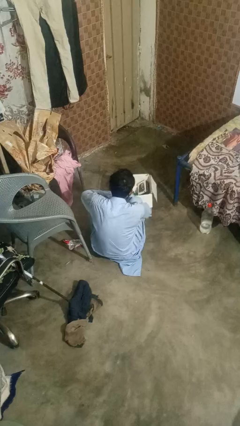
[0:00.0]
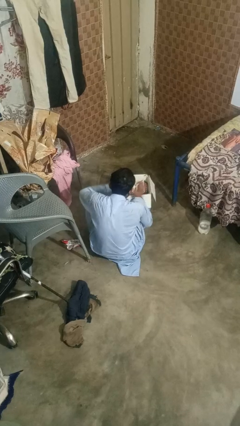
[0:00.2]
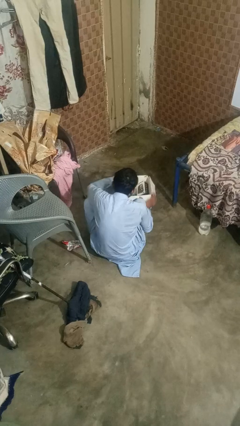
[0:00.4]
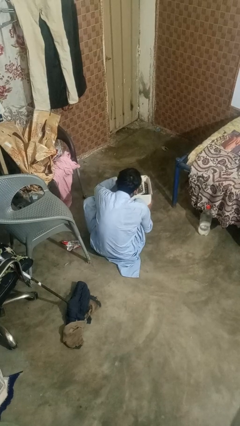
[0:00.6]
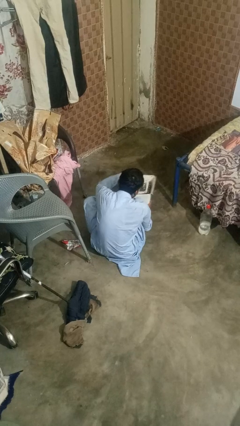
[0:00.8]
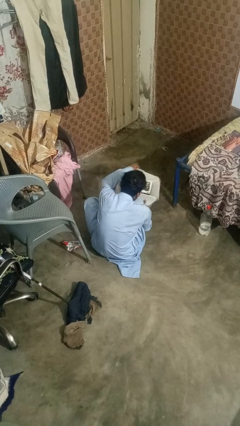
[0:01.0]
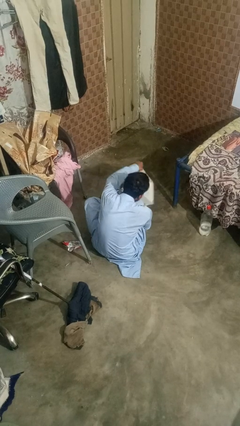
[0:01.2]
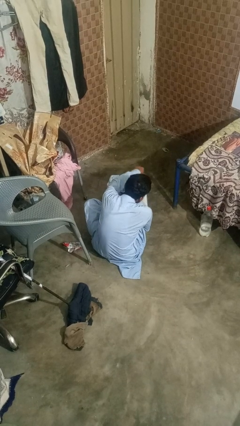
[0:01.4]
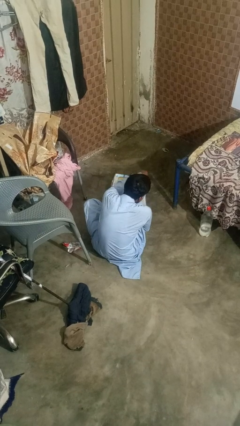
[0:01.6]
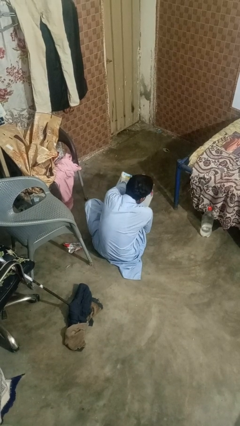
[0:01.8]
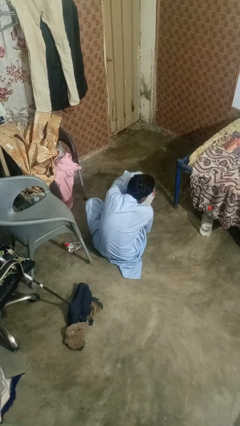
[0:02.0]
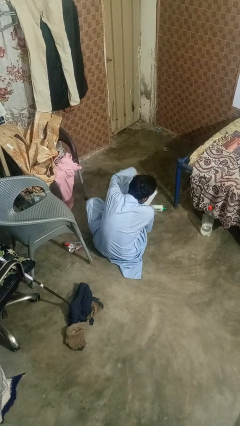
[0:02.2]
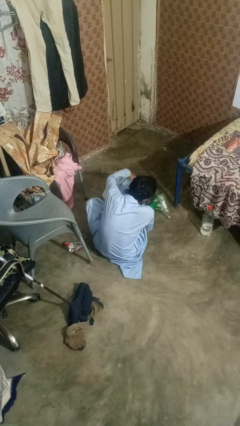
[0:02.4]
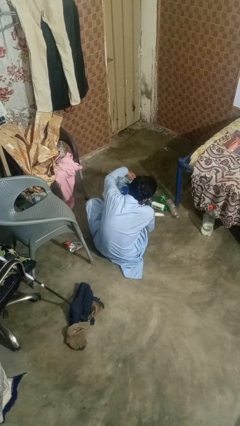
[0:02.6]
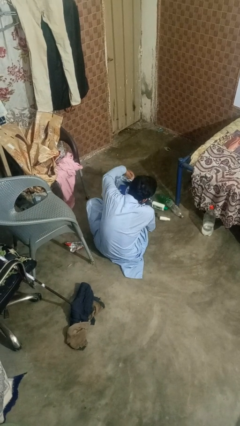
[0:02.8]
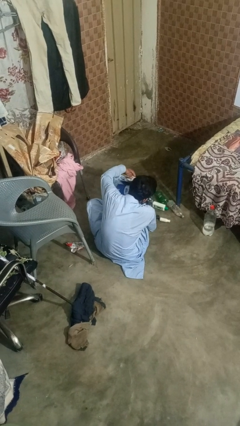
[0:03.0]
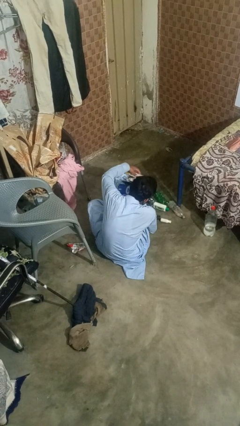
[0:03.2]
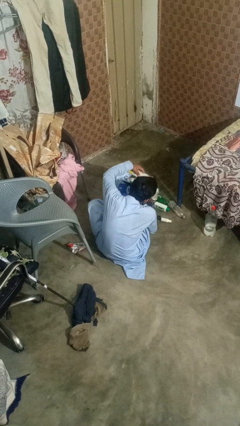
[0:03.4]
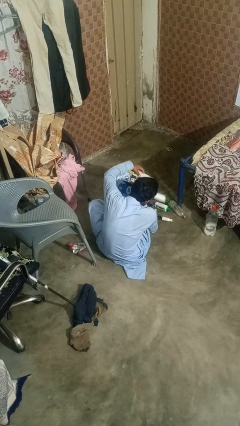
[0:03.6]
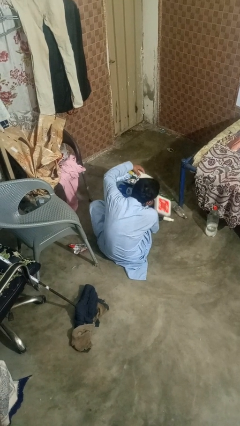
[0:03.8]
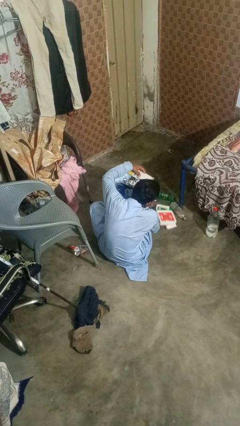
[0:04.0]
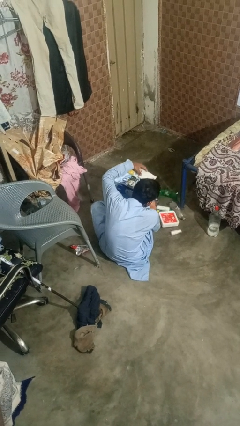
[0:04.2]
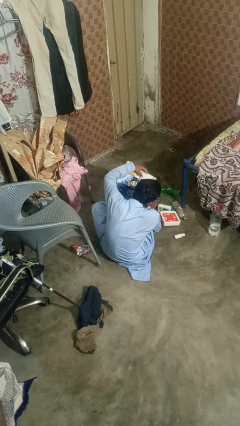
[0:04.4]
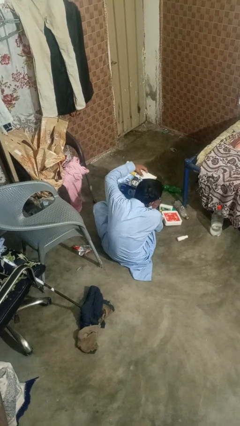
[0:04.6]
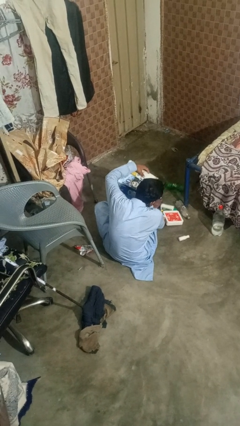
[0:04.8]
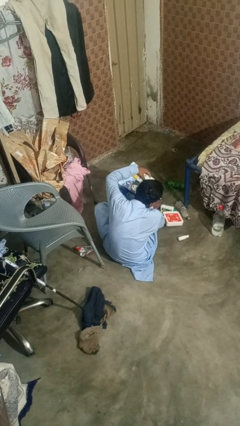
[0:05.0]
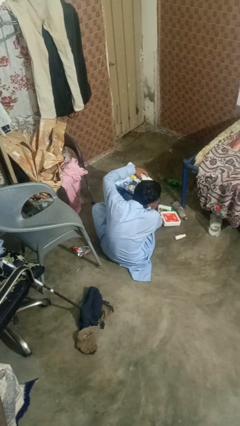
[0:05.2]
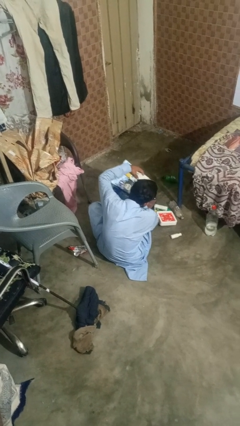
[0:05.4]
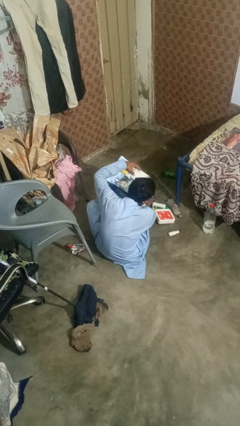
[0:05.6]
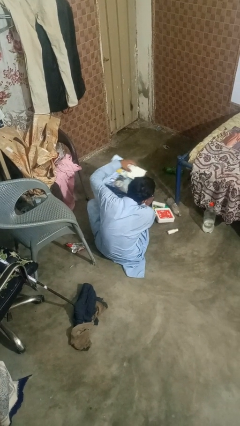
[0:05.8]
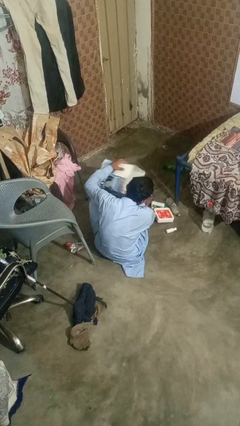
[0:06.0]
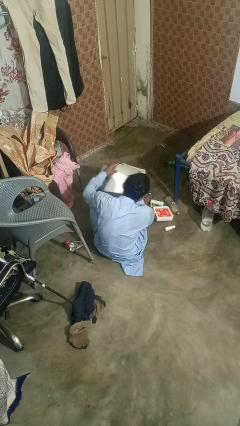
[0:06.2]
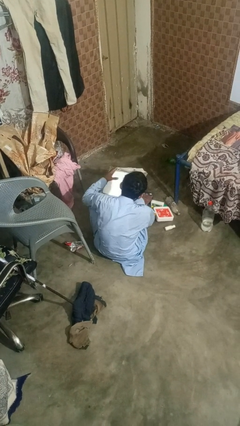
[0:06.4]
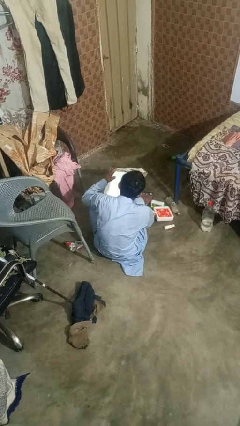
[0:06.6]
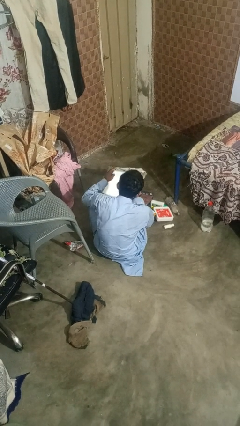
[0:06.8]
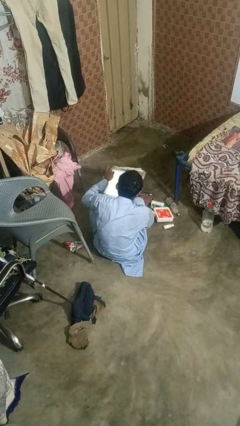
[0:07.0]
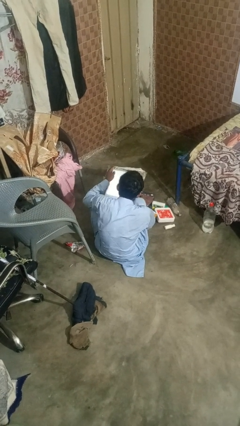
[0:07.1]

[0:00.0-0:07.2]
person unloads box onto floor

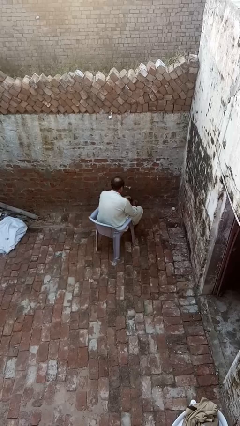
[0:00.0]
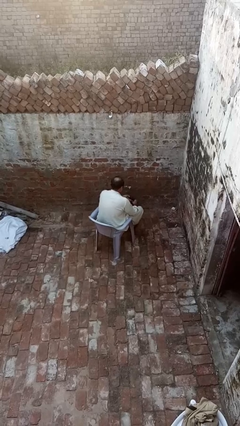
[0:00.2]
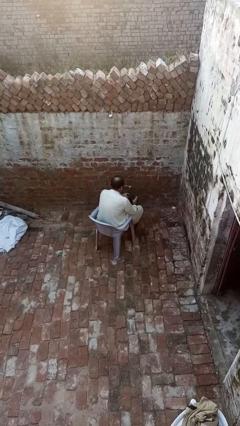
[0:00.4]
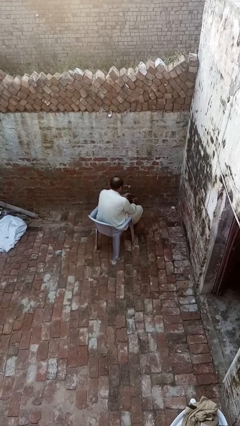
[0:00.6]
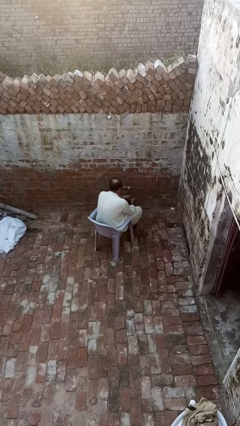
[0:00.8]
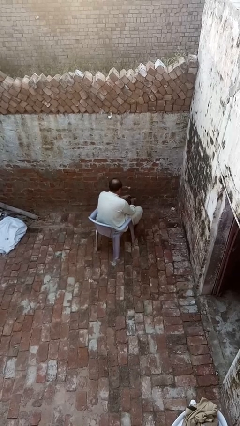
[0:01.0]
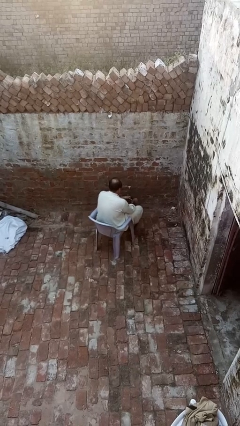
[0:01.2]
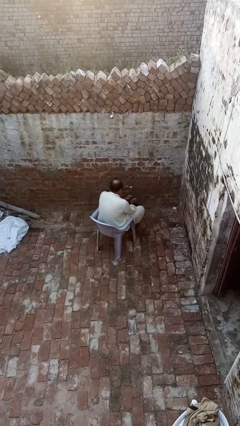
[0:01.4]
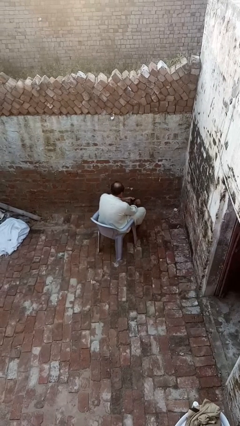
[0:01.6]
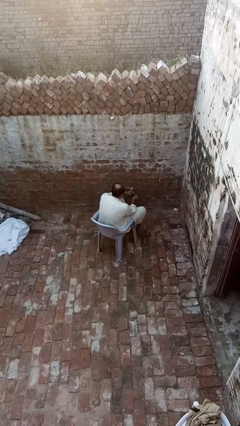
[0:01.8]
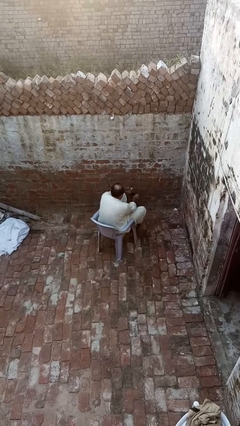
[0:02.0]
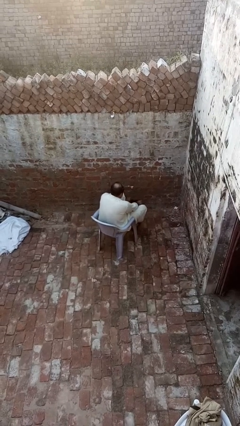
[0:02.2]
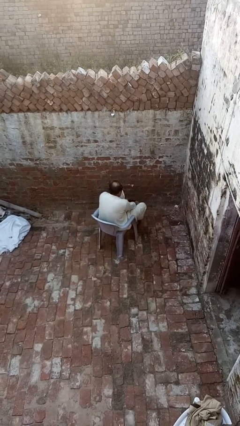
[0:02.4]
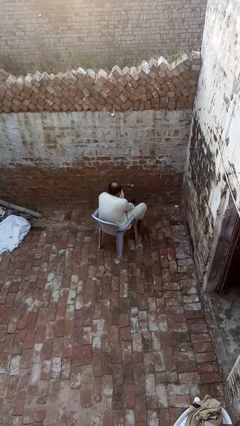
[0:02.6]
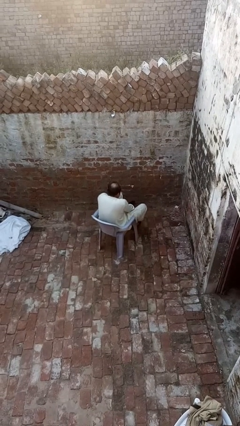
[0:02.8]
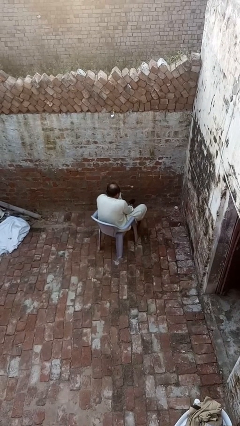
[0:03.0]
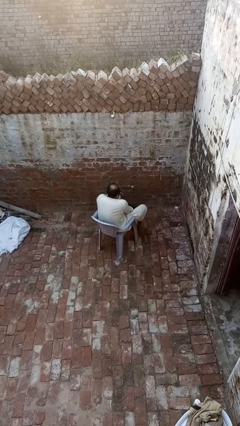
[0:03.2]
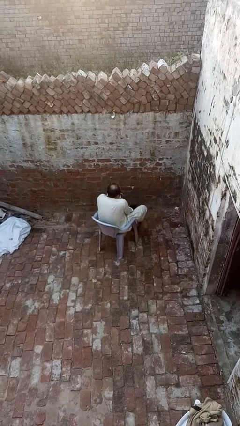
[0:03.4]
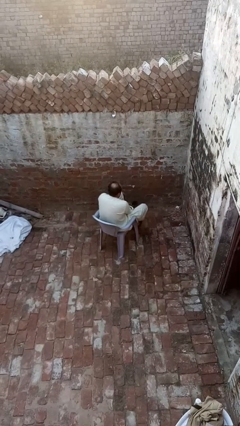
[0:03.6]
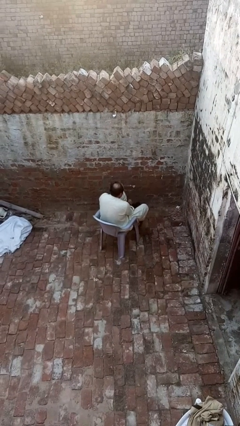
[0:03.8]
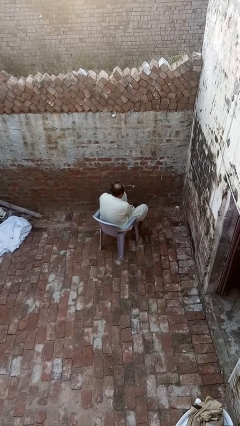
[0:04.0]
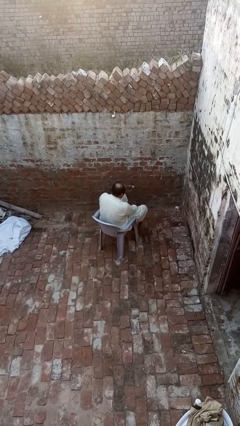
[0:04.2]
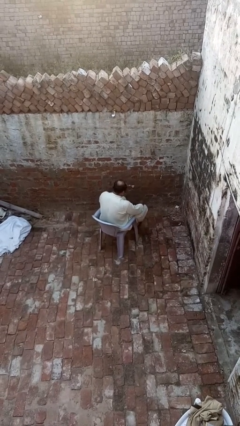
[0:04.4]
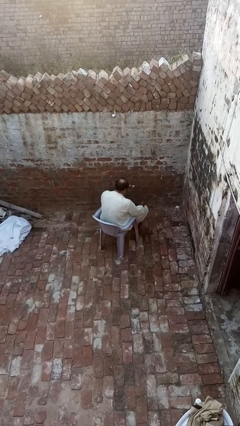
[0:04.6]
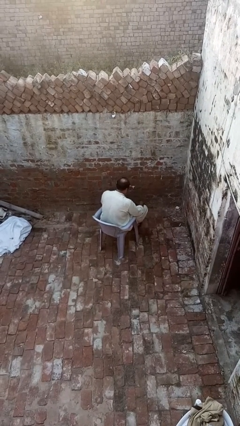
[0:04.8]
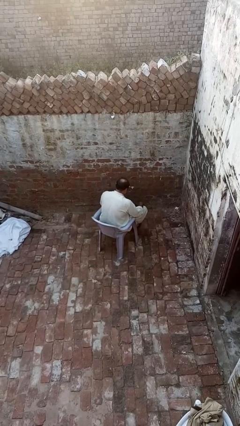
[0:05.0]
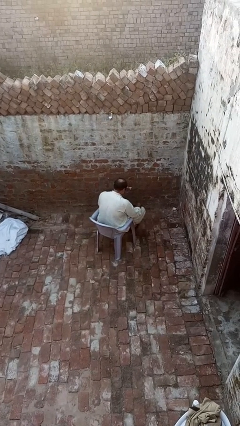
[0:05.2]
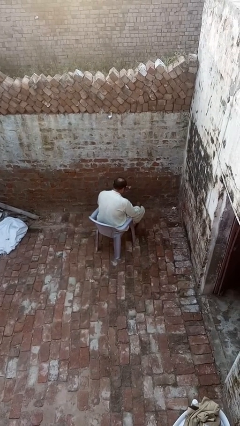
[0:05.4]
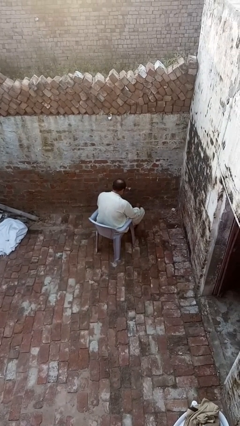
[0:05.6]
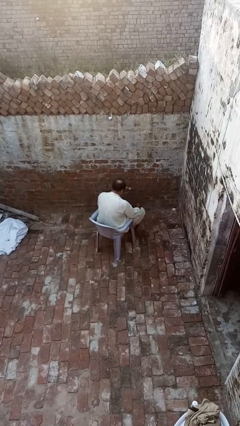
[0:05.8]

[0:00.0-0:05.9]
person puts on socks

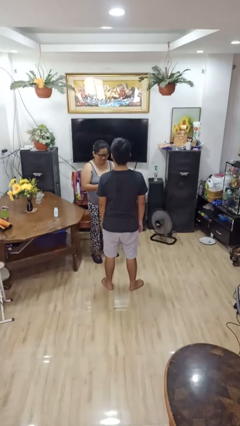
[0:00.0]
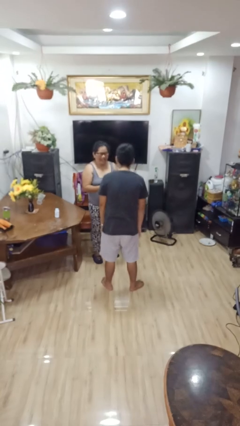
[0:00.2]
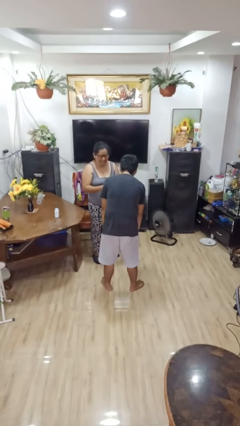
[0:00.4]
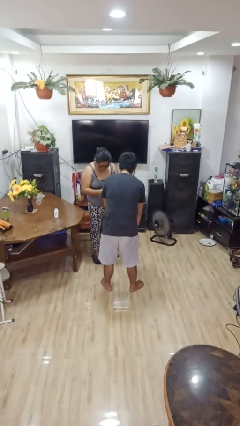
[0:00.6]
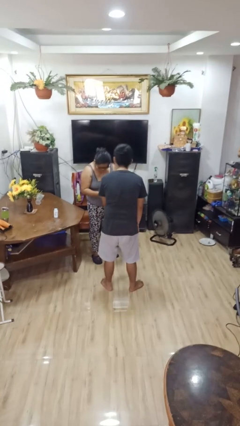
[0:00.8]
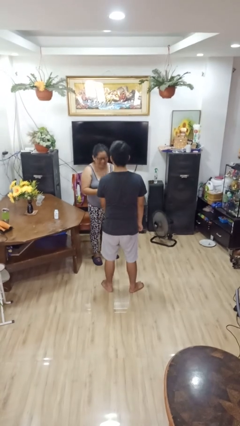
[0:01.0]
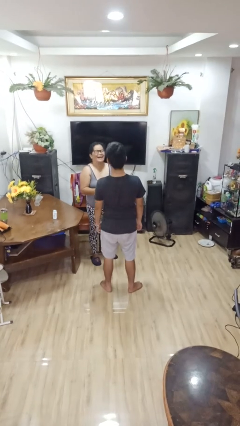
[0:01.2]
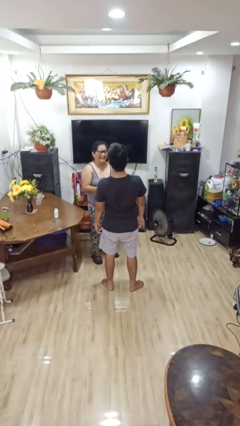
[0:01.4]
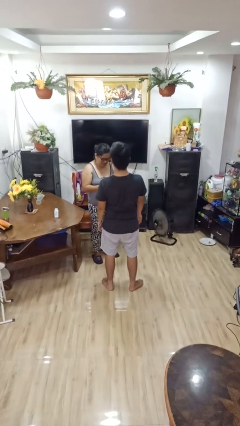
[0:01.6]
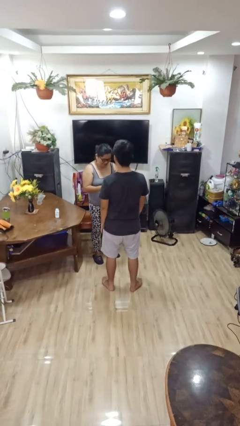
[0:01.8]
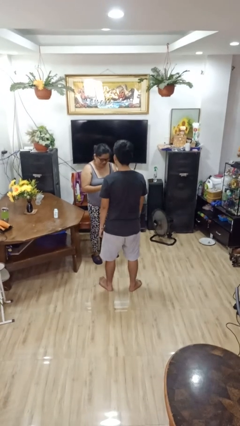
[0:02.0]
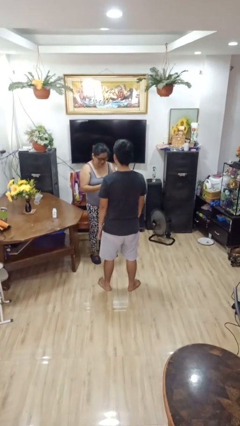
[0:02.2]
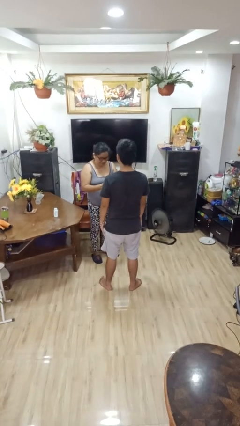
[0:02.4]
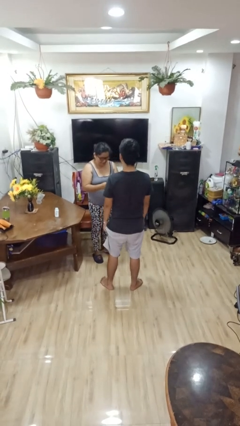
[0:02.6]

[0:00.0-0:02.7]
person laughs with person

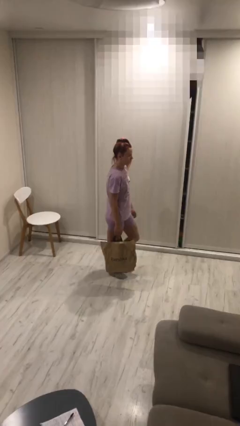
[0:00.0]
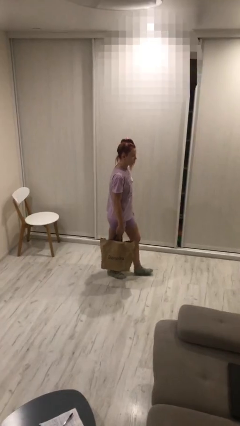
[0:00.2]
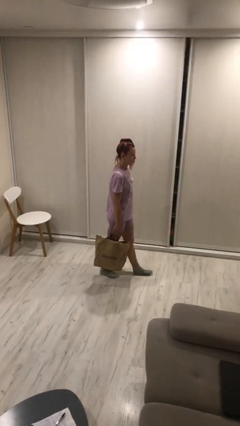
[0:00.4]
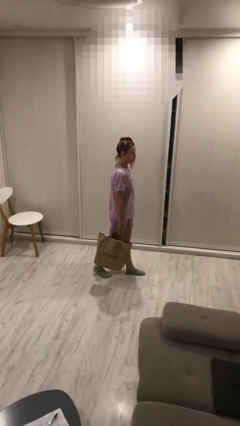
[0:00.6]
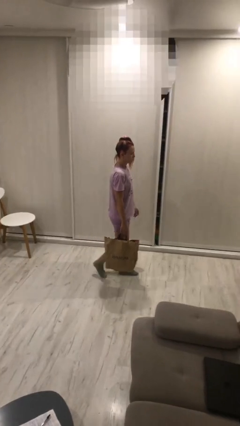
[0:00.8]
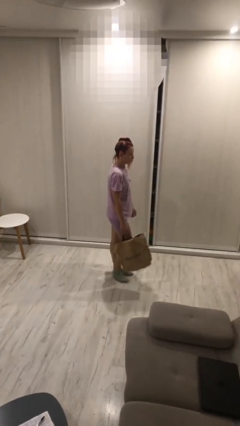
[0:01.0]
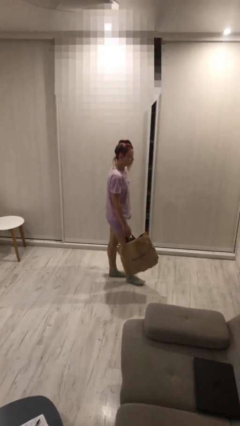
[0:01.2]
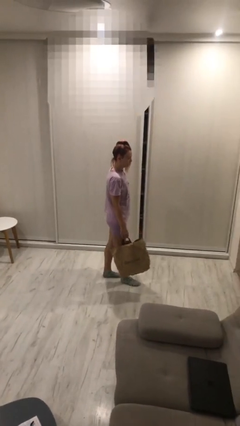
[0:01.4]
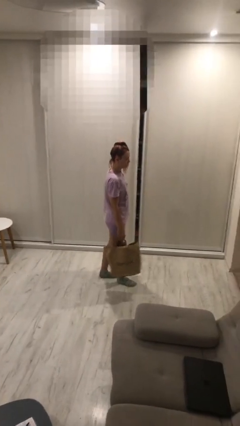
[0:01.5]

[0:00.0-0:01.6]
person carries groceries

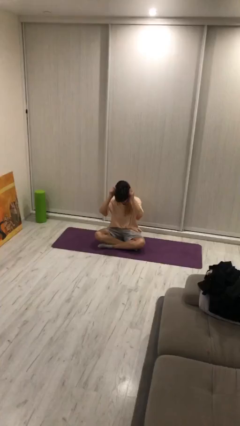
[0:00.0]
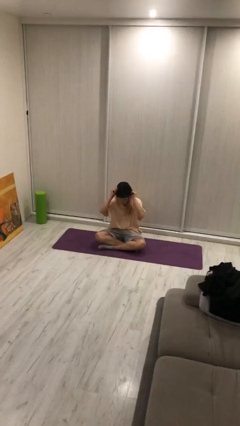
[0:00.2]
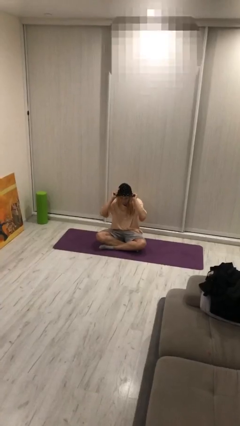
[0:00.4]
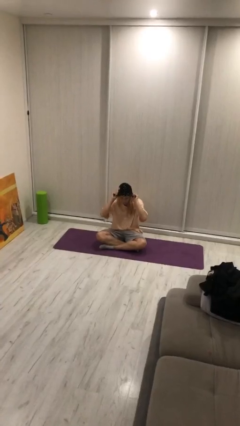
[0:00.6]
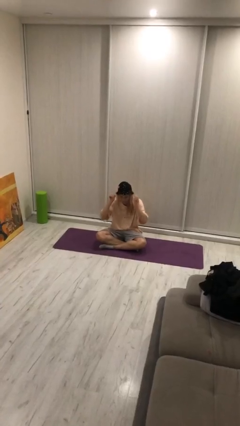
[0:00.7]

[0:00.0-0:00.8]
person puts on hat
